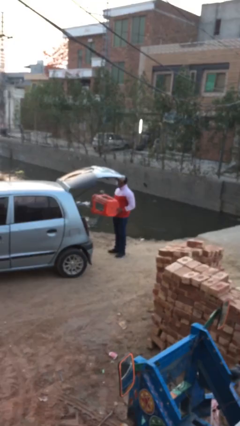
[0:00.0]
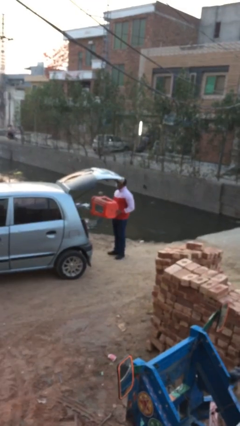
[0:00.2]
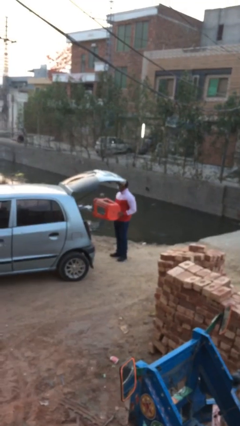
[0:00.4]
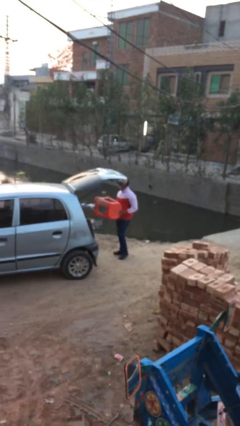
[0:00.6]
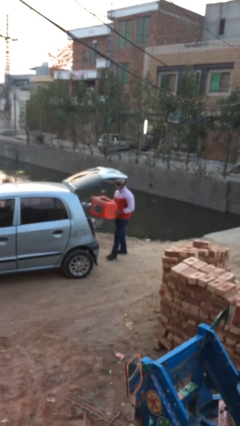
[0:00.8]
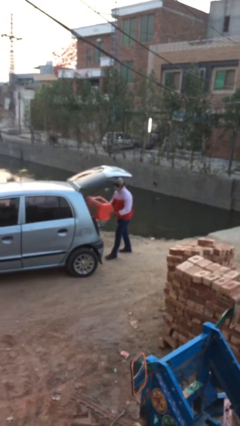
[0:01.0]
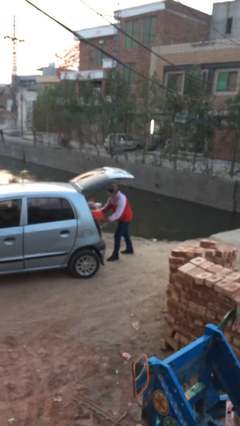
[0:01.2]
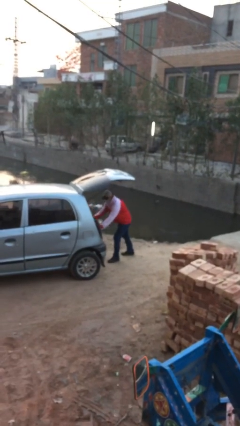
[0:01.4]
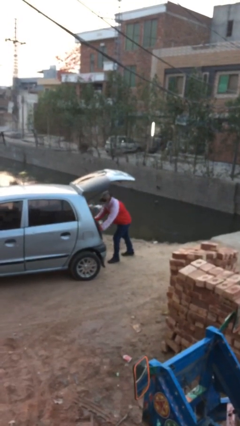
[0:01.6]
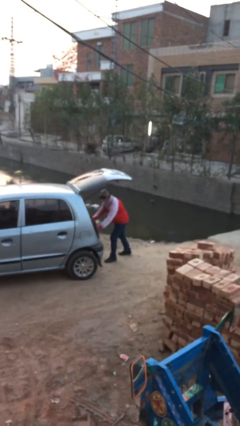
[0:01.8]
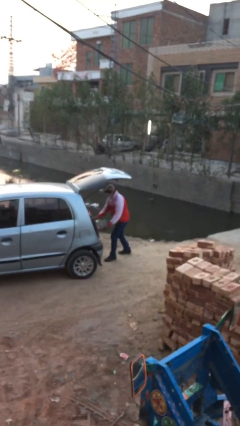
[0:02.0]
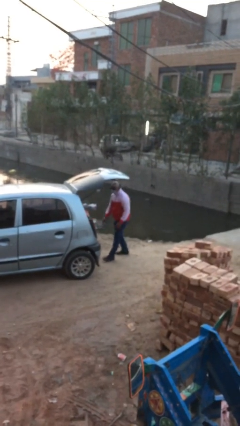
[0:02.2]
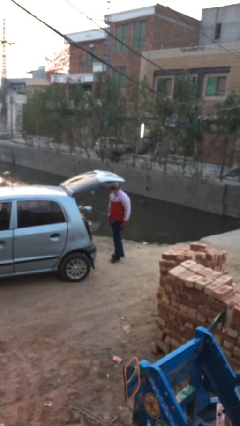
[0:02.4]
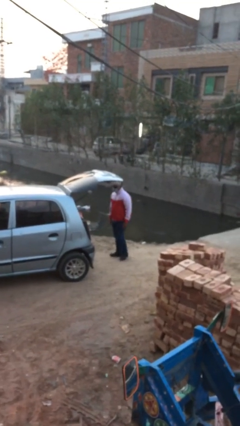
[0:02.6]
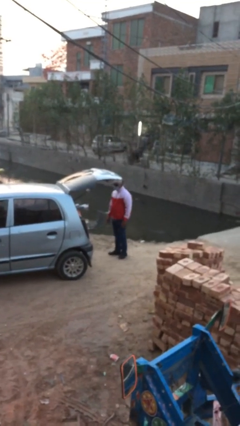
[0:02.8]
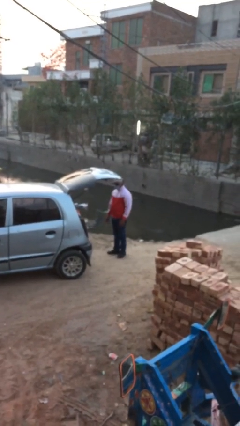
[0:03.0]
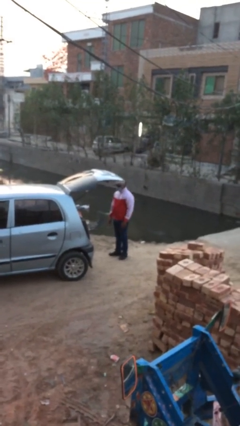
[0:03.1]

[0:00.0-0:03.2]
person loads car

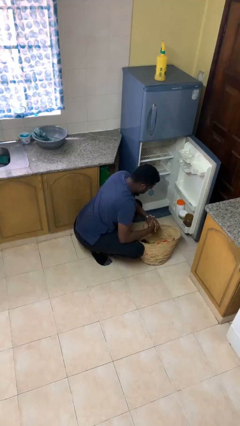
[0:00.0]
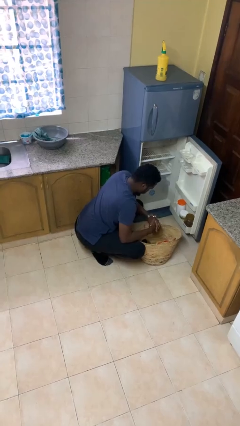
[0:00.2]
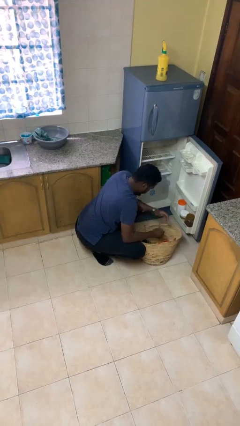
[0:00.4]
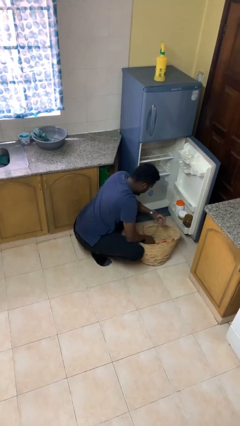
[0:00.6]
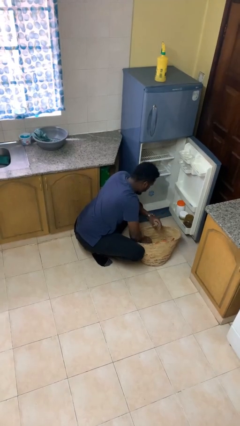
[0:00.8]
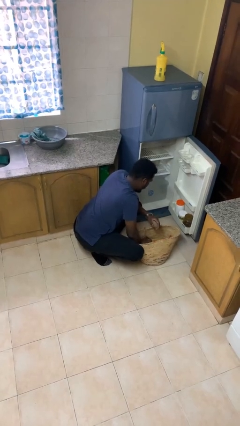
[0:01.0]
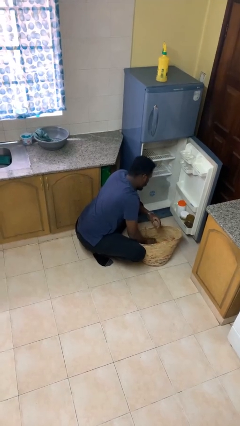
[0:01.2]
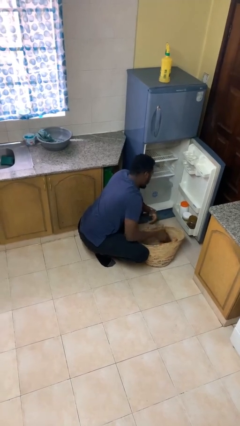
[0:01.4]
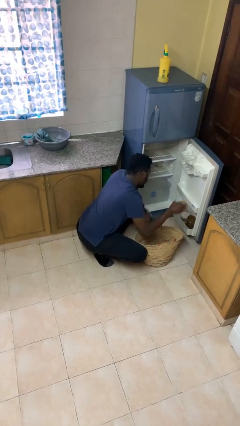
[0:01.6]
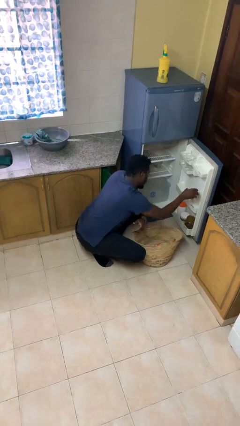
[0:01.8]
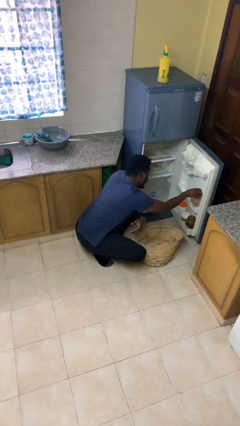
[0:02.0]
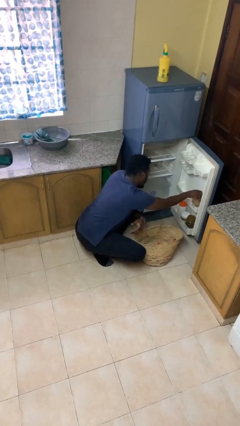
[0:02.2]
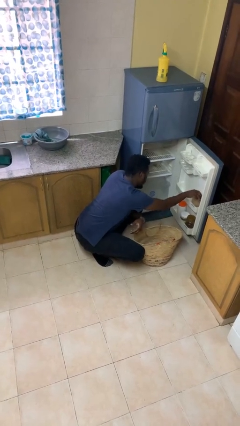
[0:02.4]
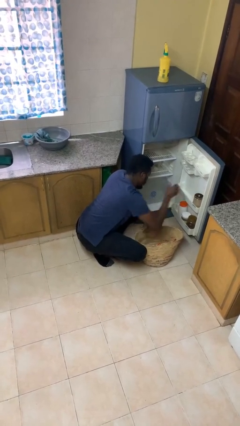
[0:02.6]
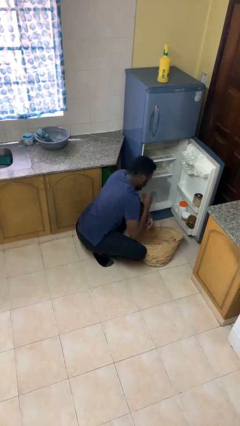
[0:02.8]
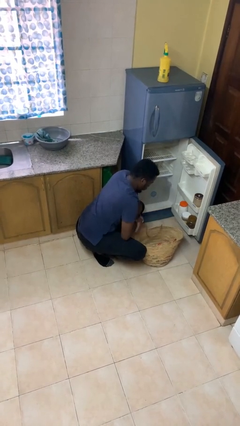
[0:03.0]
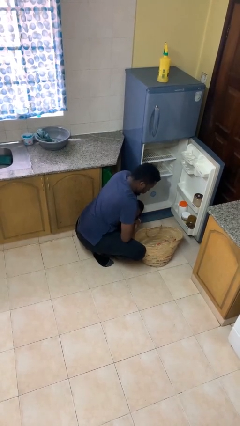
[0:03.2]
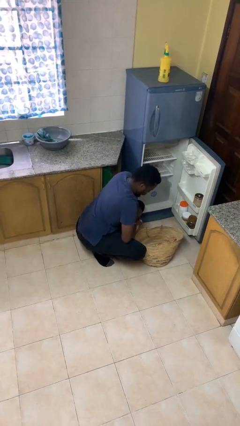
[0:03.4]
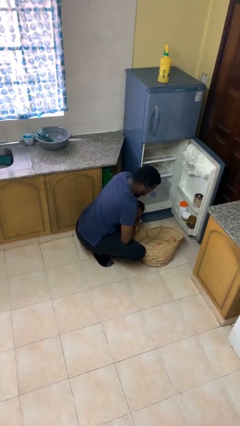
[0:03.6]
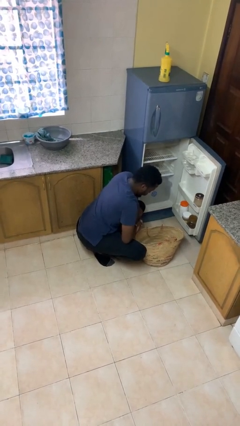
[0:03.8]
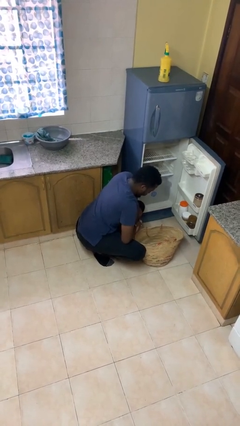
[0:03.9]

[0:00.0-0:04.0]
person loads groceries into refrigerator

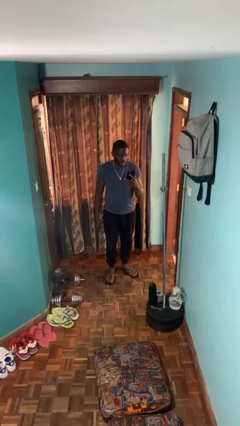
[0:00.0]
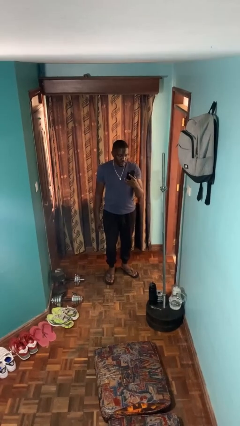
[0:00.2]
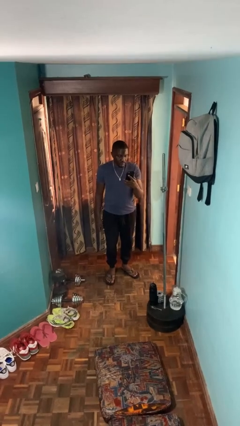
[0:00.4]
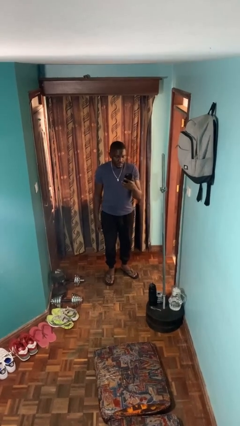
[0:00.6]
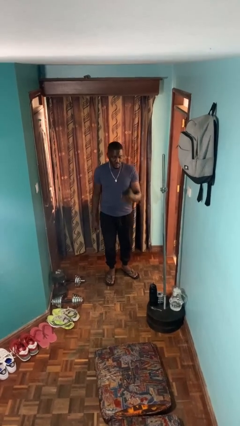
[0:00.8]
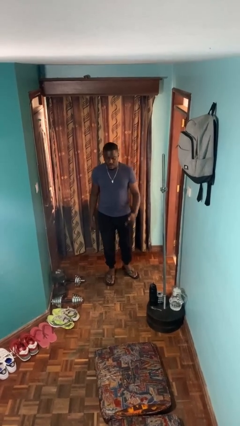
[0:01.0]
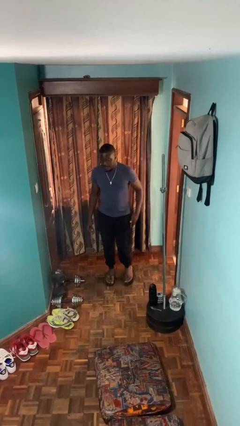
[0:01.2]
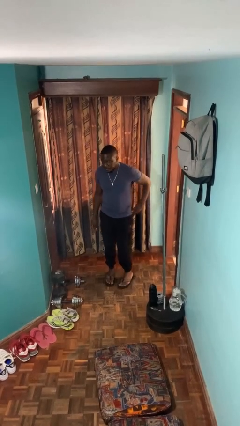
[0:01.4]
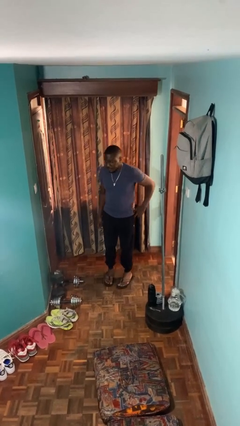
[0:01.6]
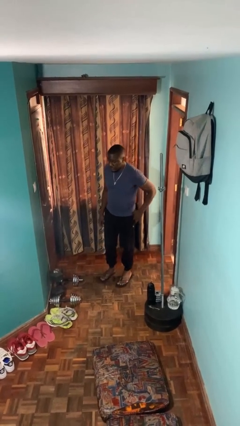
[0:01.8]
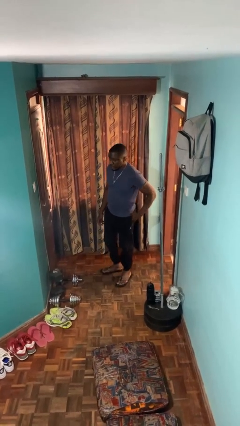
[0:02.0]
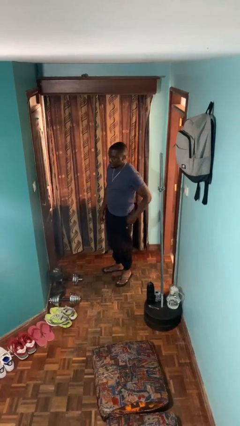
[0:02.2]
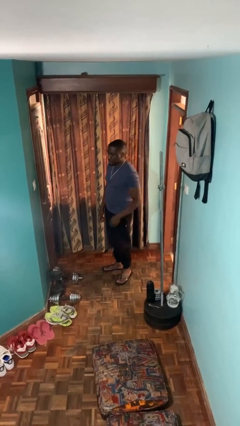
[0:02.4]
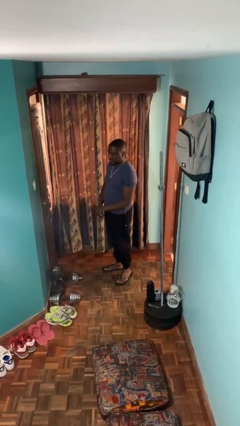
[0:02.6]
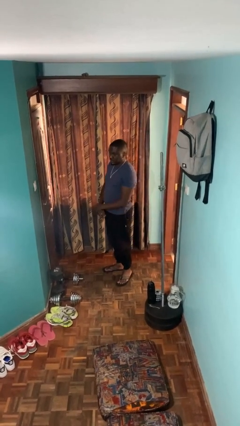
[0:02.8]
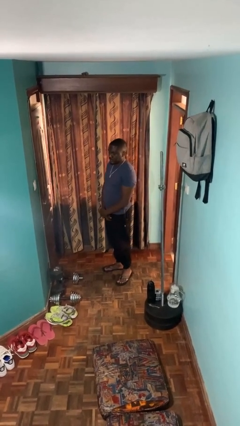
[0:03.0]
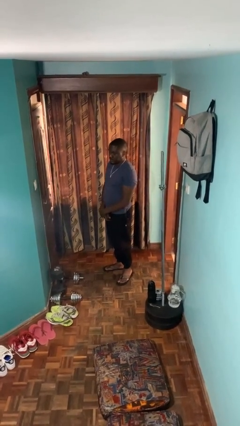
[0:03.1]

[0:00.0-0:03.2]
person puts phone into pocket

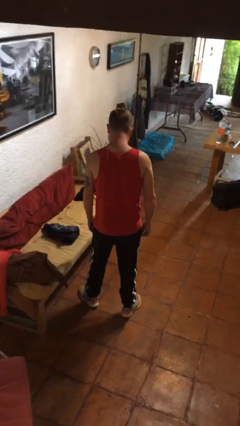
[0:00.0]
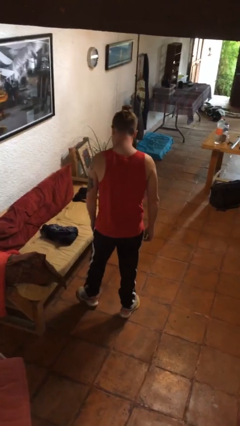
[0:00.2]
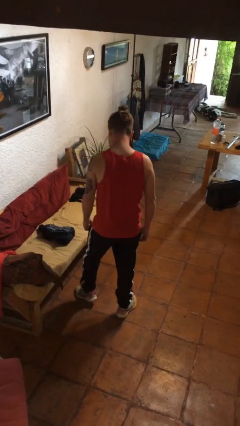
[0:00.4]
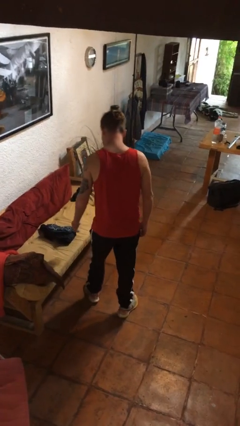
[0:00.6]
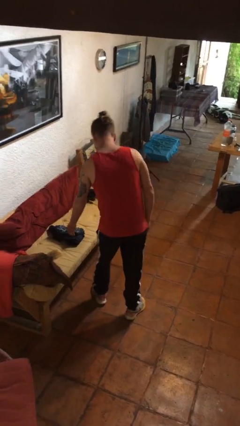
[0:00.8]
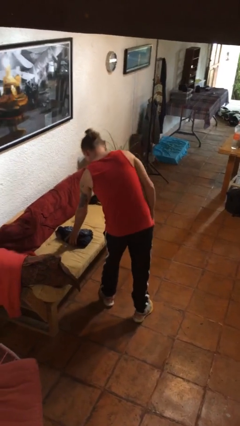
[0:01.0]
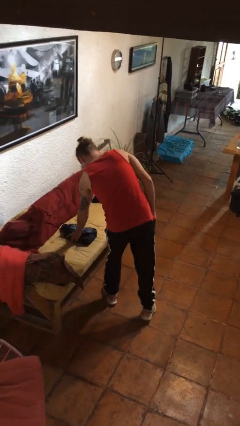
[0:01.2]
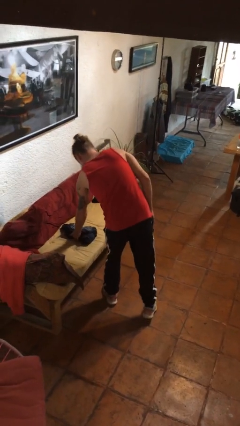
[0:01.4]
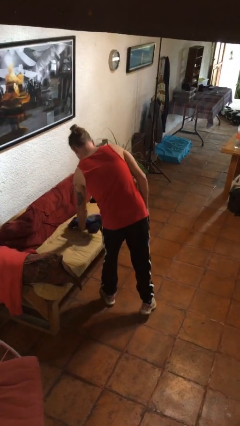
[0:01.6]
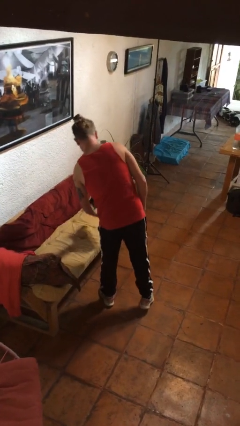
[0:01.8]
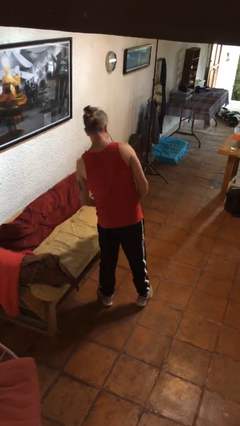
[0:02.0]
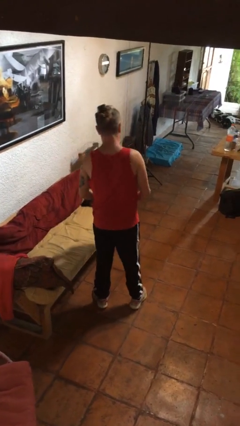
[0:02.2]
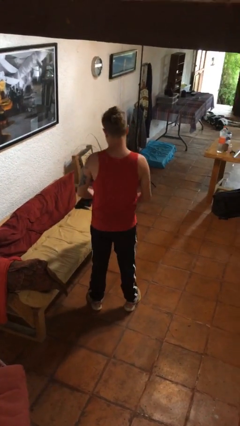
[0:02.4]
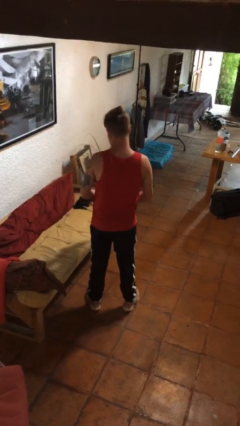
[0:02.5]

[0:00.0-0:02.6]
person picks up object from couch

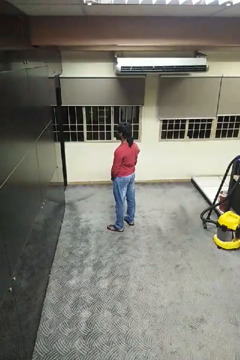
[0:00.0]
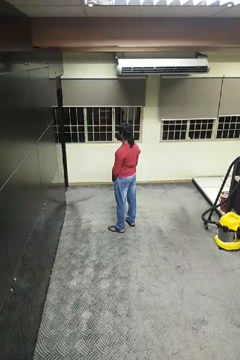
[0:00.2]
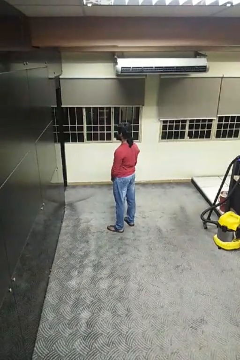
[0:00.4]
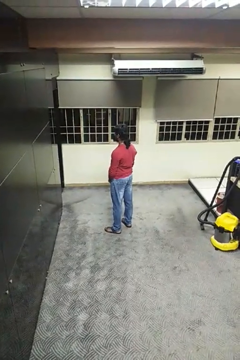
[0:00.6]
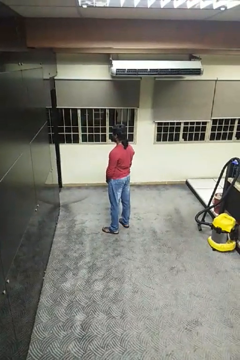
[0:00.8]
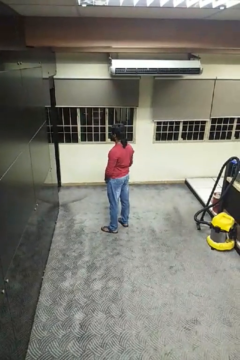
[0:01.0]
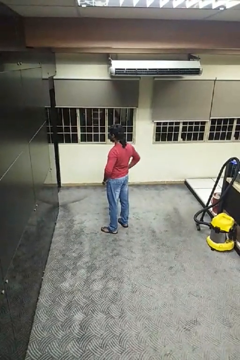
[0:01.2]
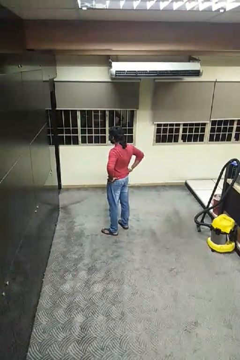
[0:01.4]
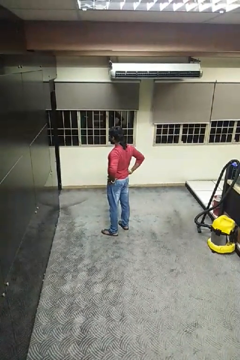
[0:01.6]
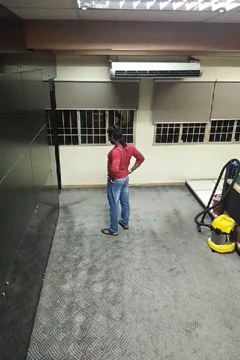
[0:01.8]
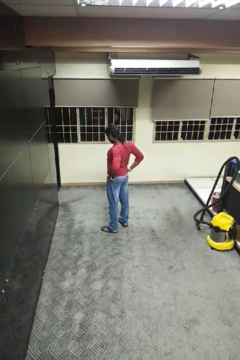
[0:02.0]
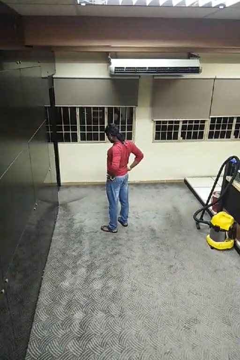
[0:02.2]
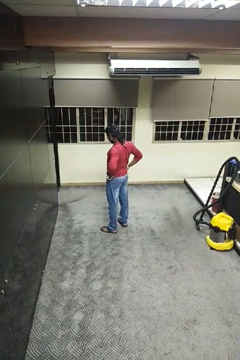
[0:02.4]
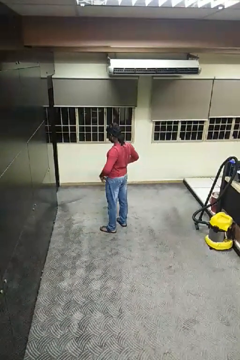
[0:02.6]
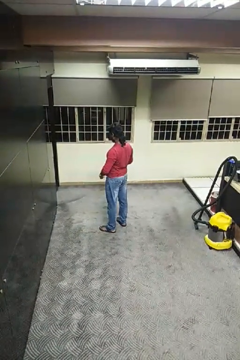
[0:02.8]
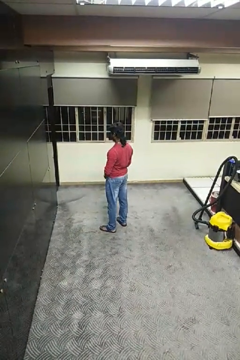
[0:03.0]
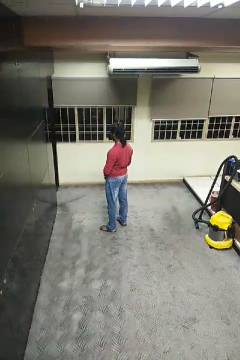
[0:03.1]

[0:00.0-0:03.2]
person stretches back

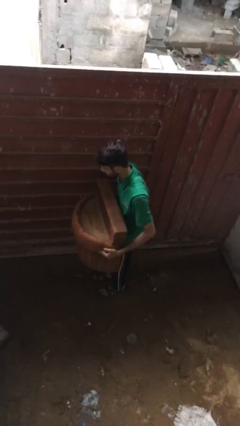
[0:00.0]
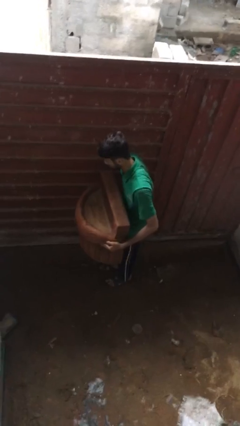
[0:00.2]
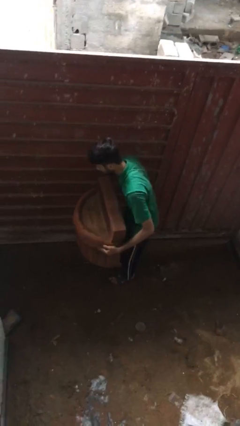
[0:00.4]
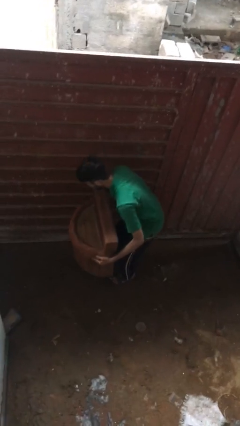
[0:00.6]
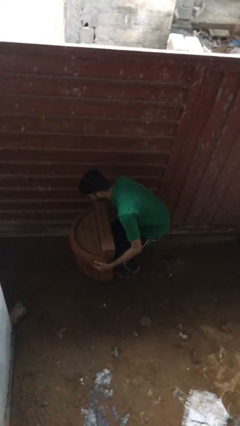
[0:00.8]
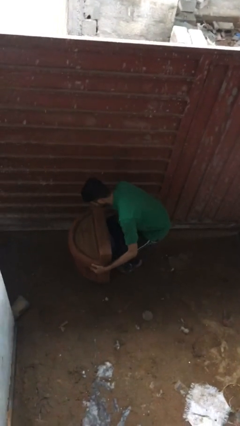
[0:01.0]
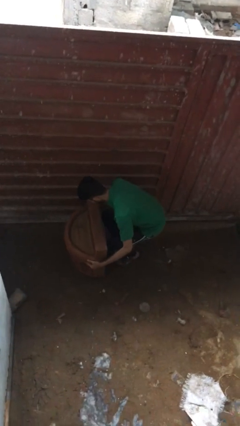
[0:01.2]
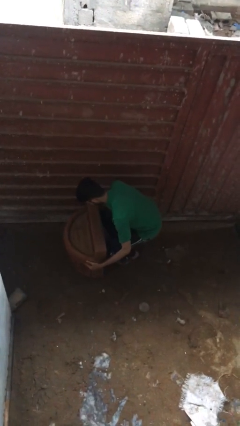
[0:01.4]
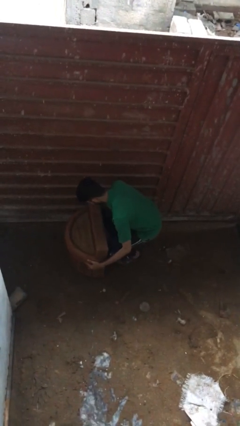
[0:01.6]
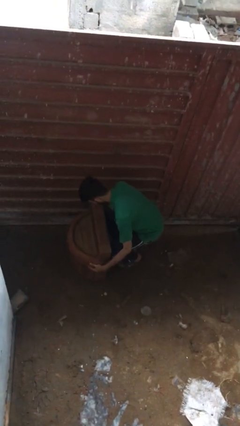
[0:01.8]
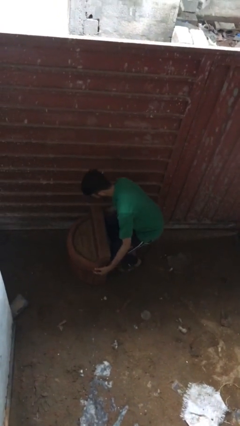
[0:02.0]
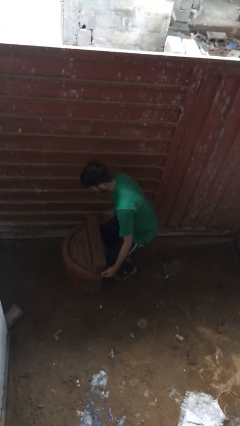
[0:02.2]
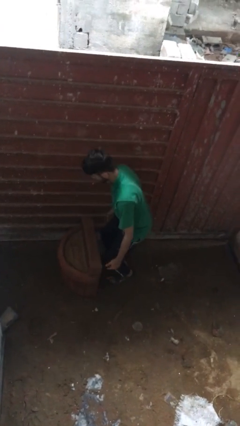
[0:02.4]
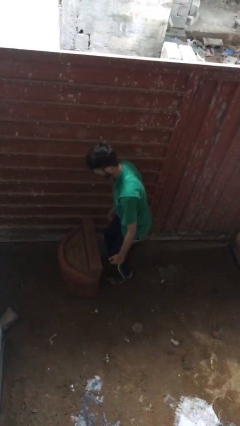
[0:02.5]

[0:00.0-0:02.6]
person puts down object on floor
